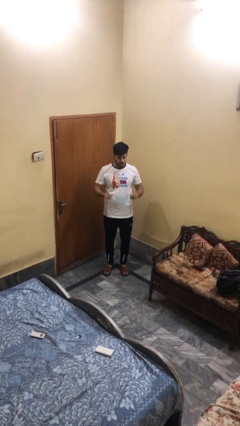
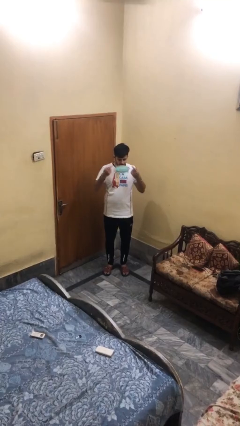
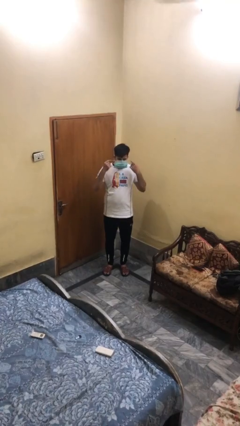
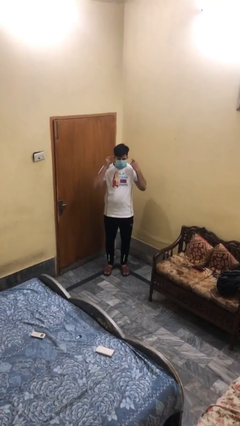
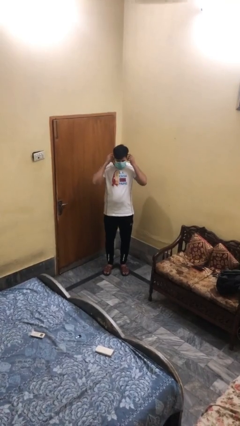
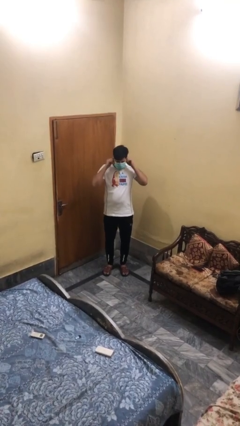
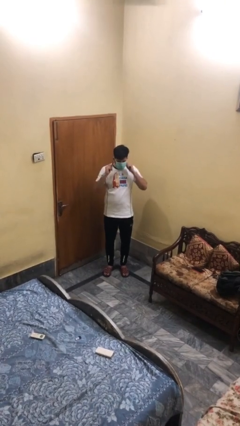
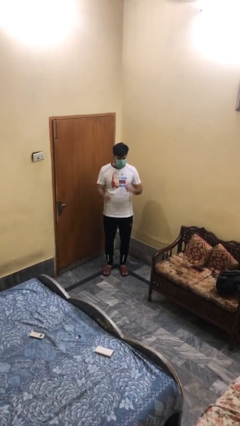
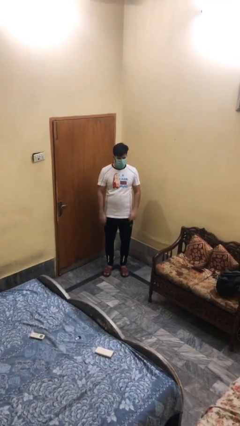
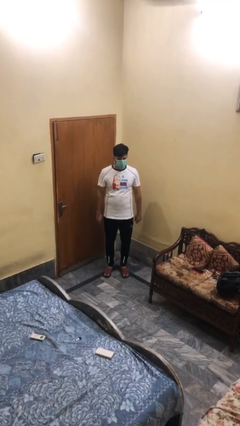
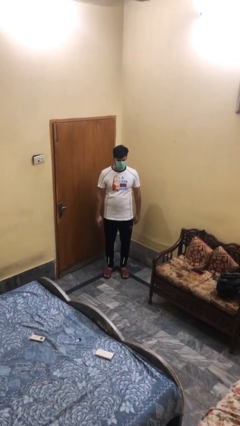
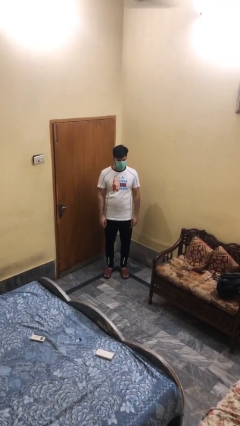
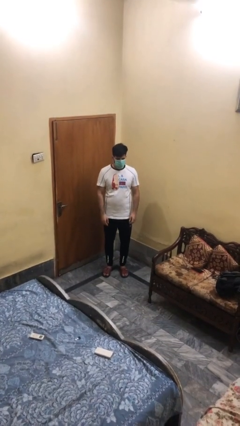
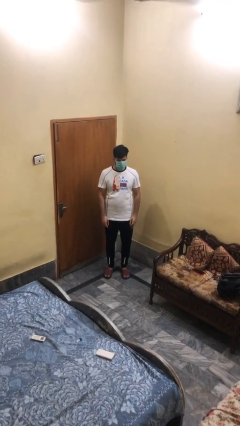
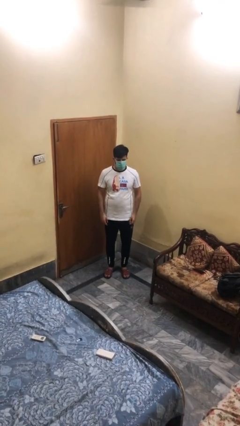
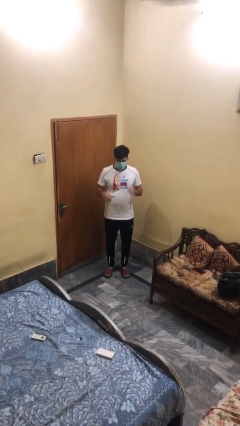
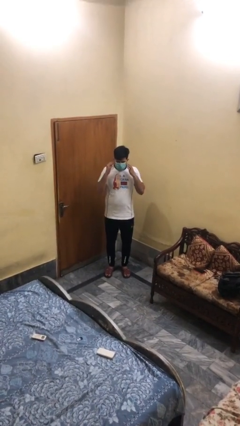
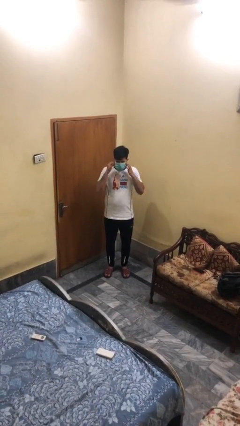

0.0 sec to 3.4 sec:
person puts on facemask

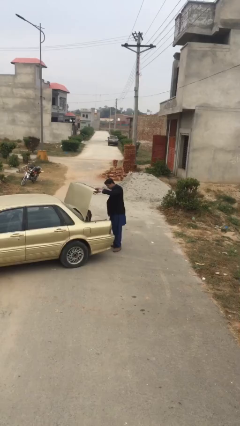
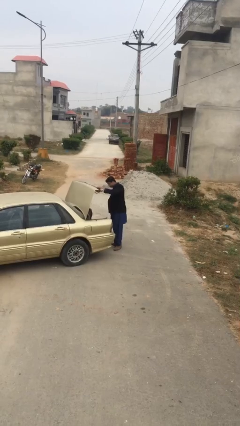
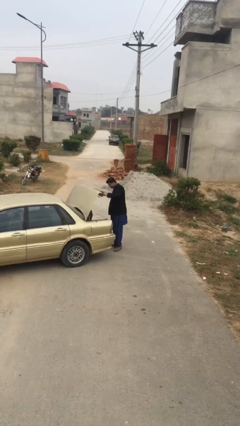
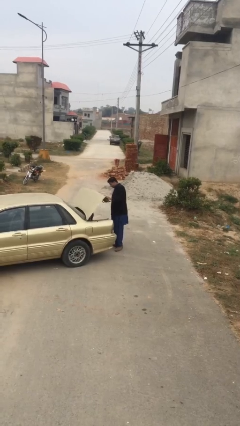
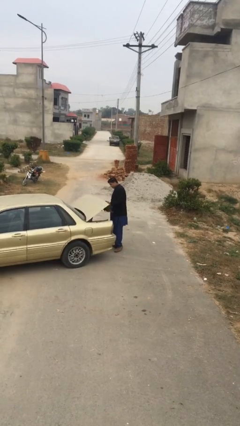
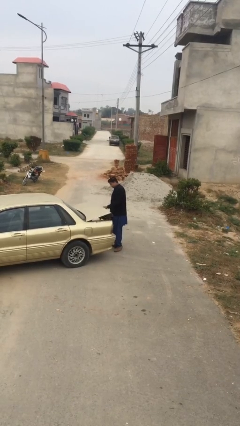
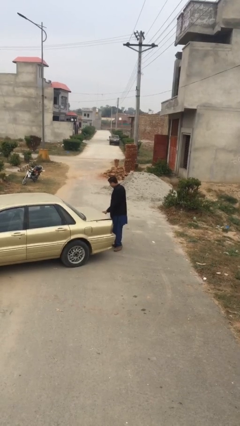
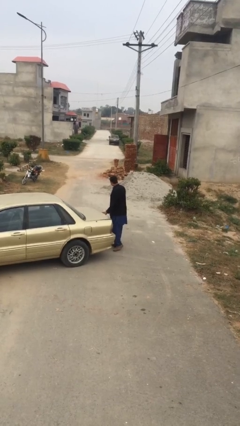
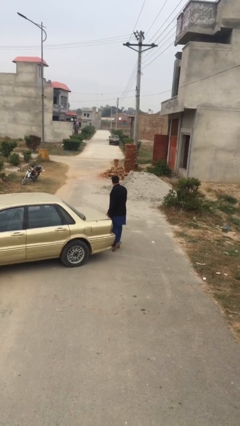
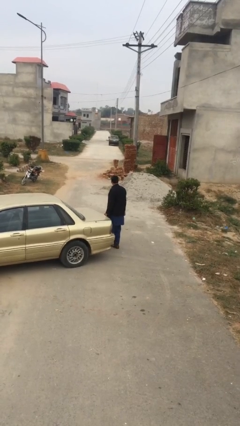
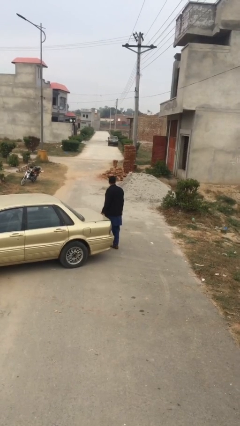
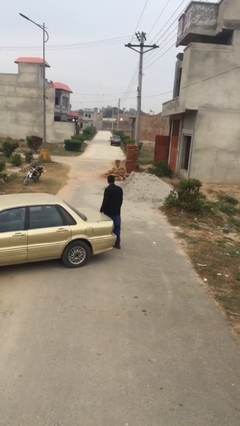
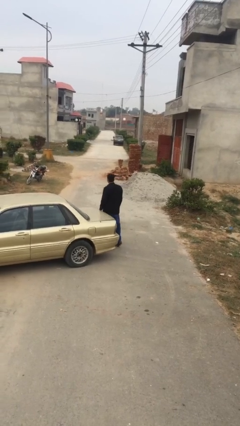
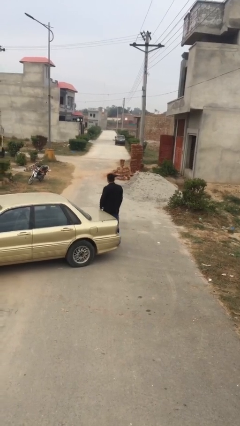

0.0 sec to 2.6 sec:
person closes car trunk

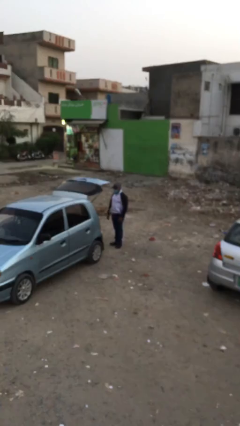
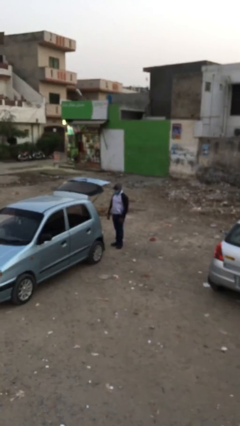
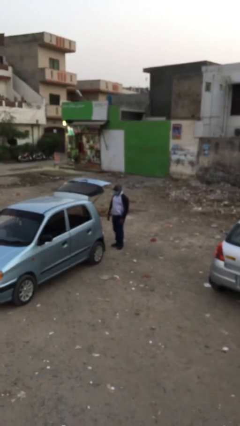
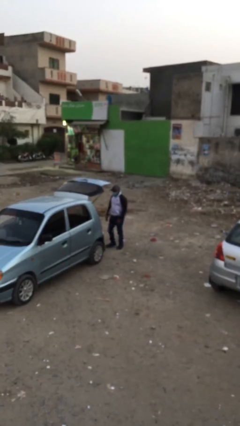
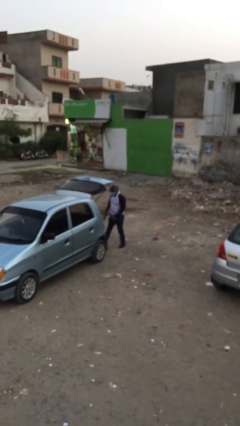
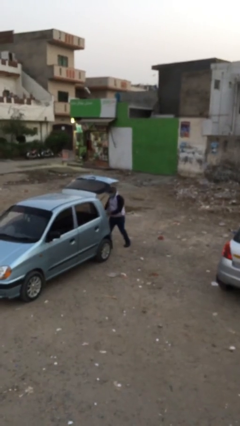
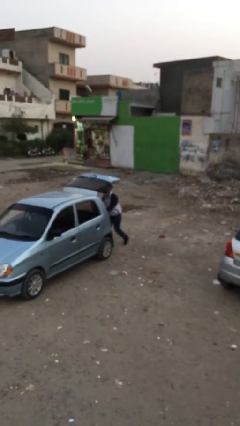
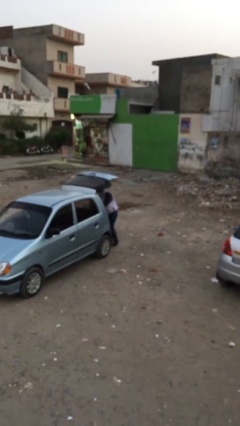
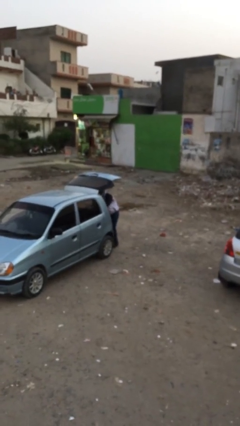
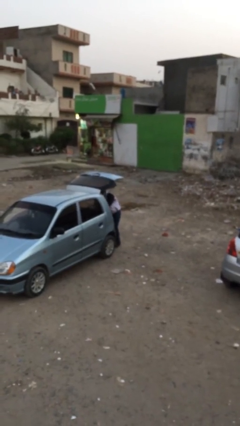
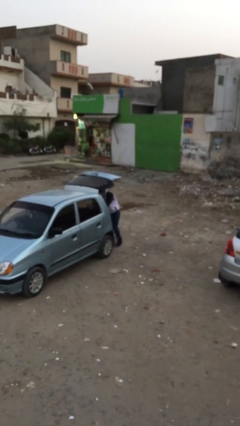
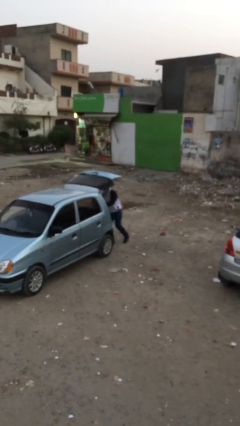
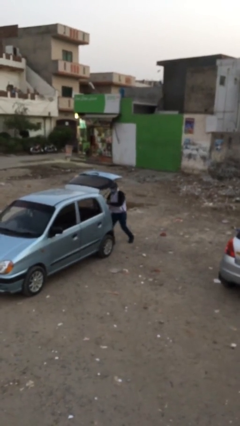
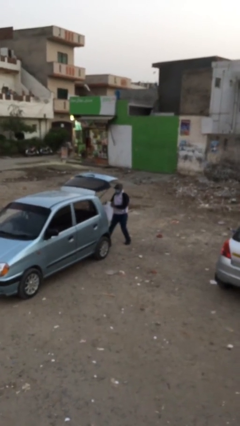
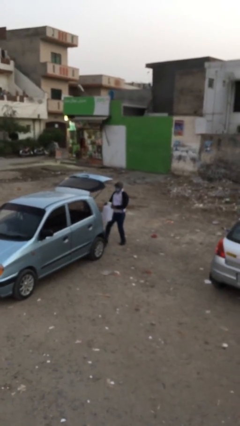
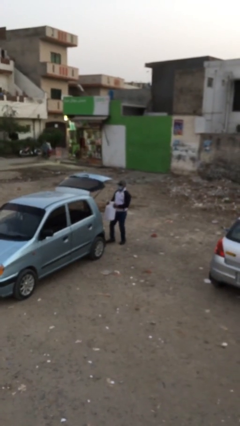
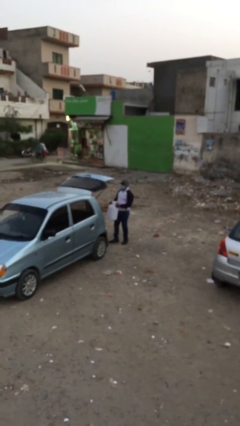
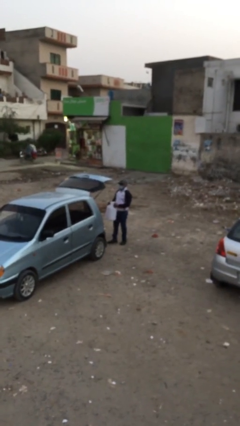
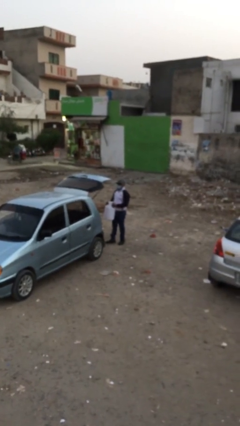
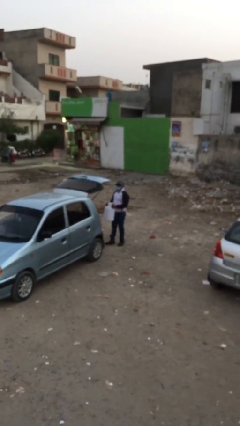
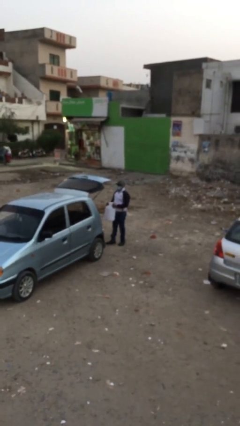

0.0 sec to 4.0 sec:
person unloads car

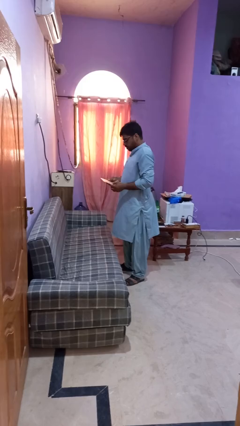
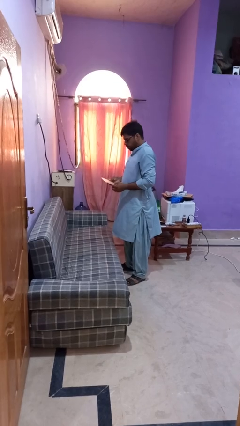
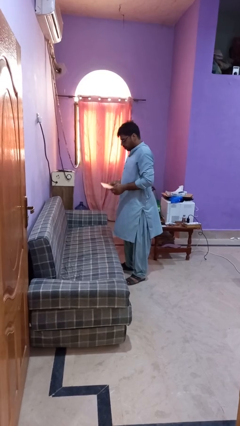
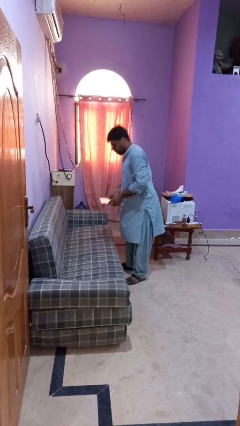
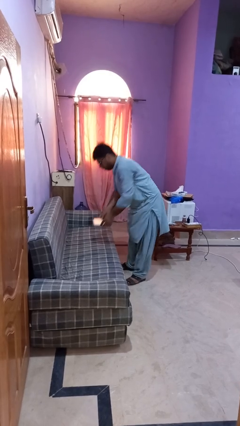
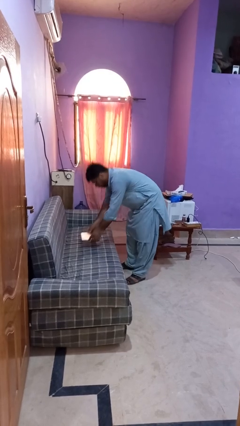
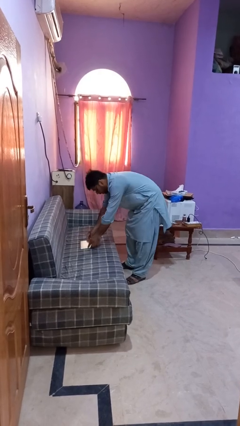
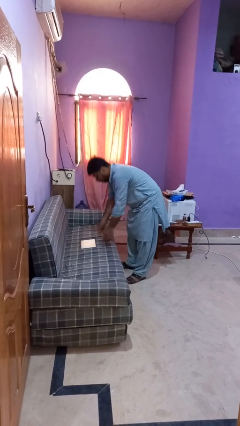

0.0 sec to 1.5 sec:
person puts down object on couch

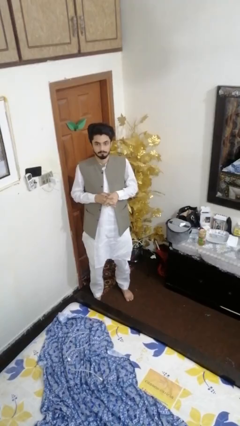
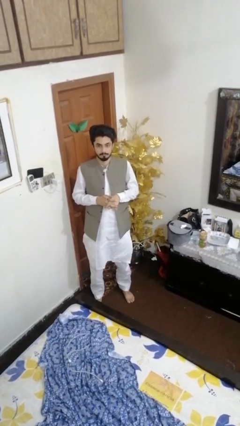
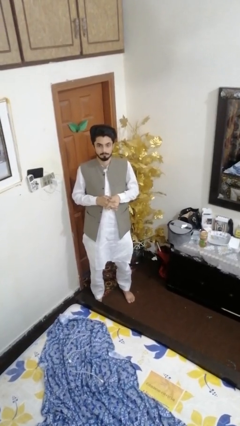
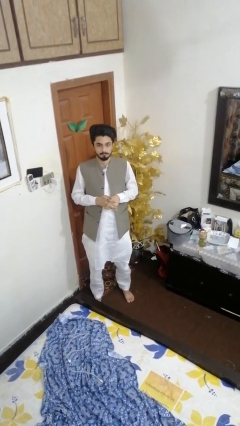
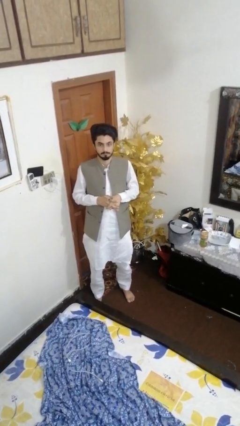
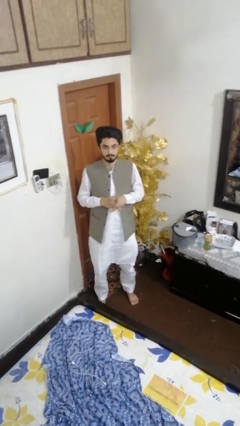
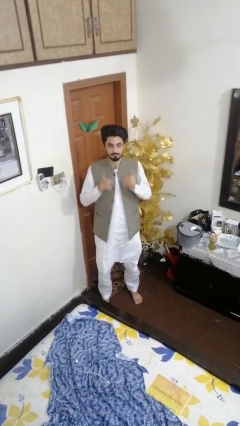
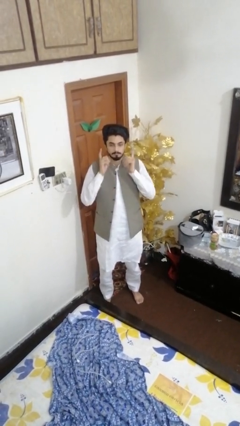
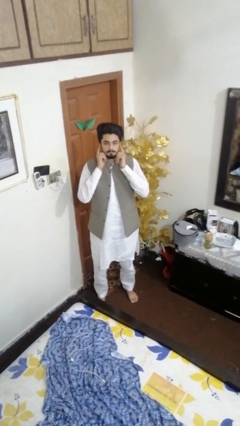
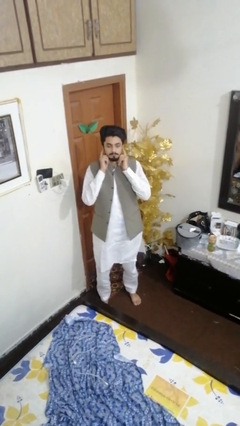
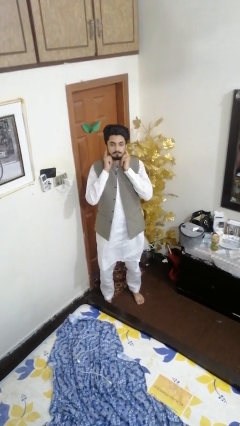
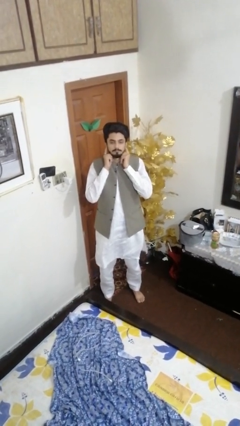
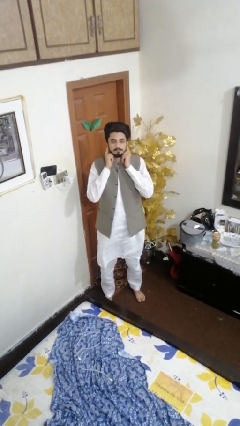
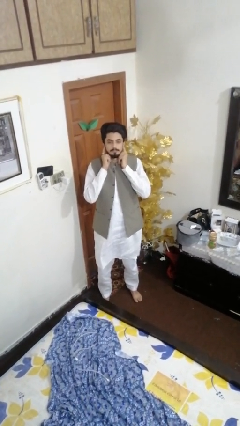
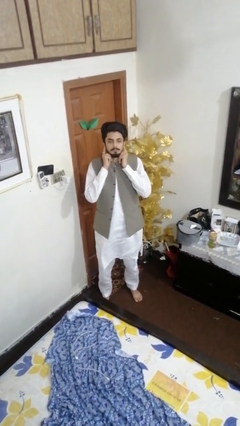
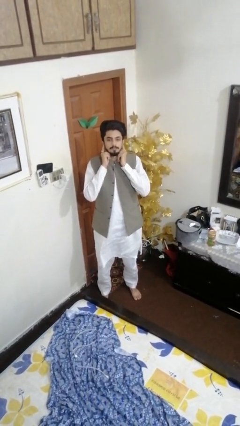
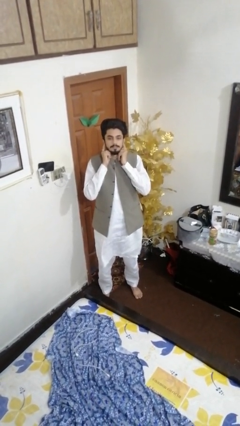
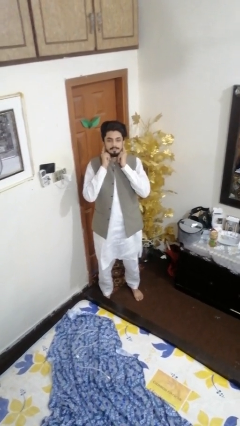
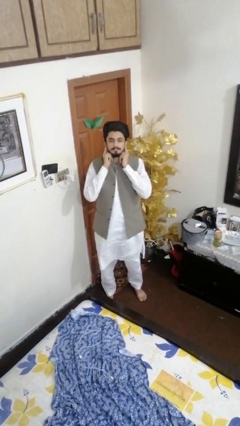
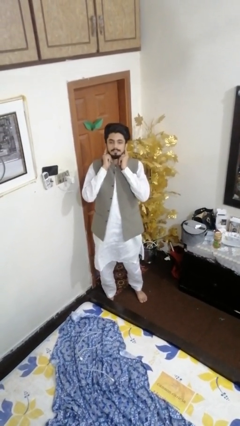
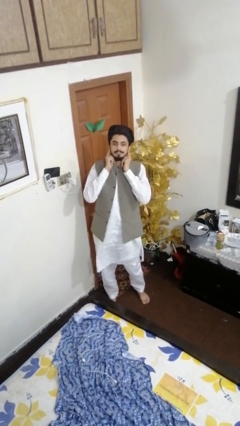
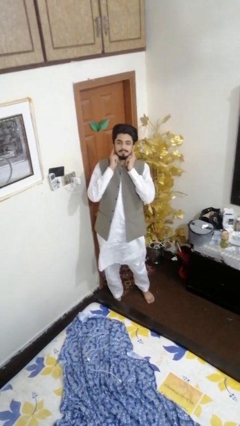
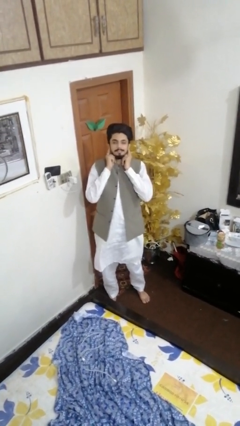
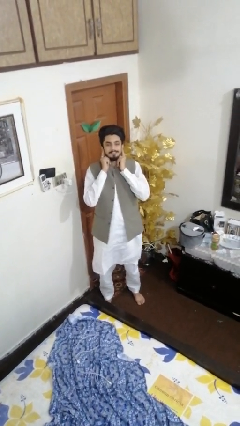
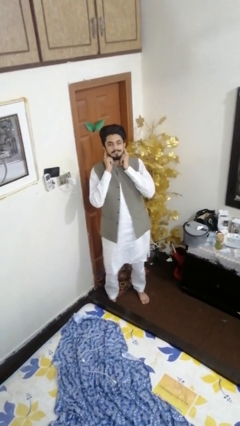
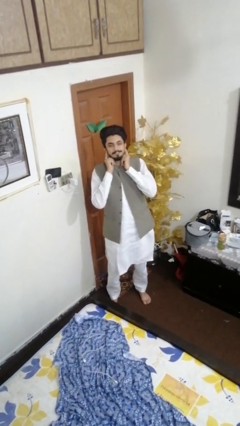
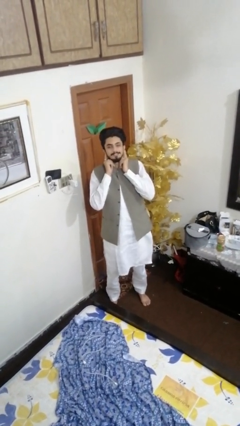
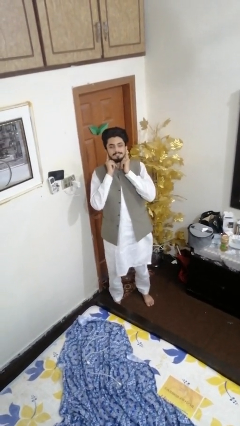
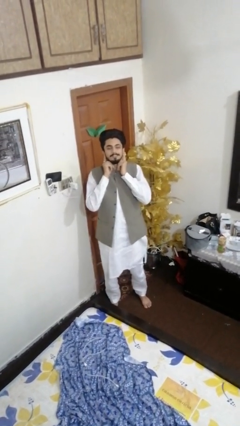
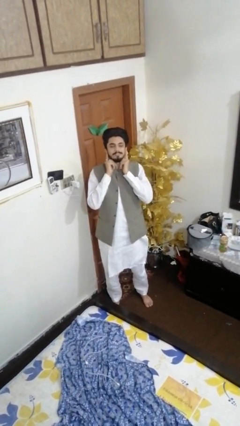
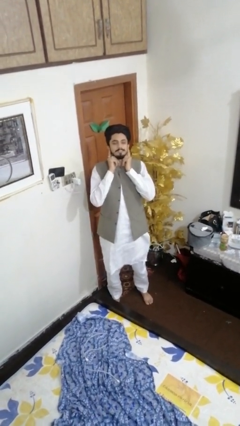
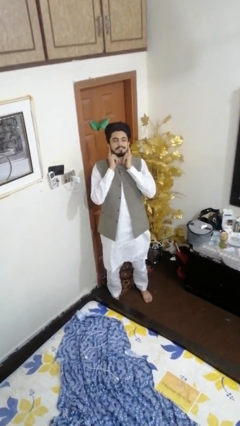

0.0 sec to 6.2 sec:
person puts fingers in ear

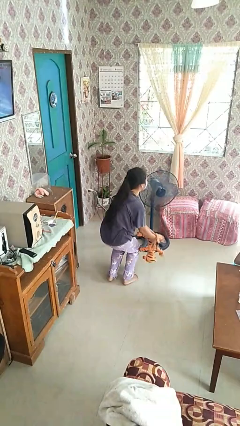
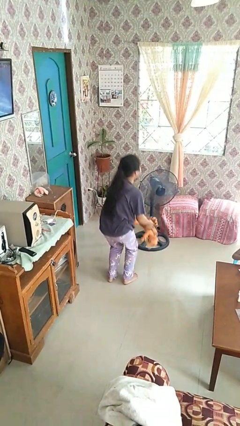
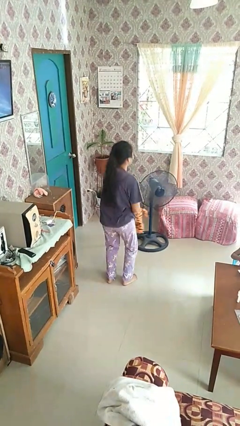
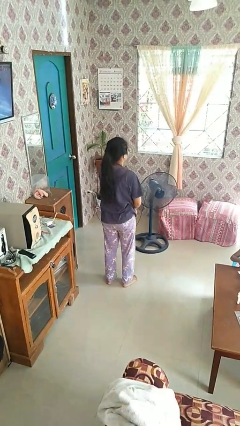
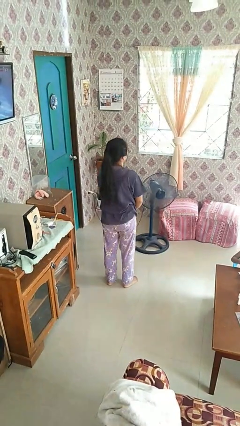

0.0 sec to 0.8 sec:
person catches dropped object
